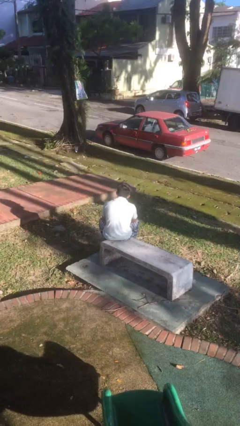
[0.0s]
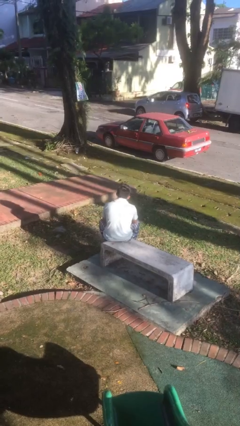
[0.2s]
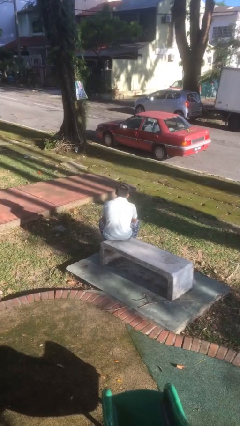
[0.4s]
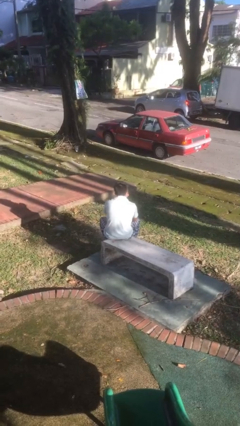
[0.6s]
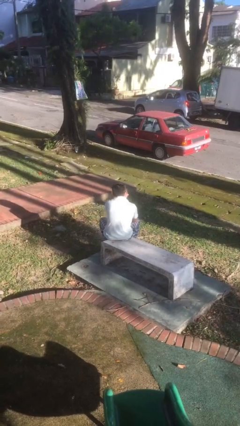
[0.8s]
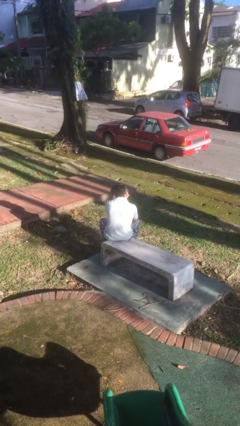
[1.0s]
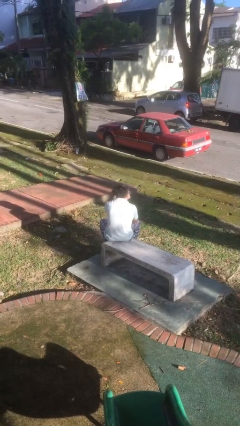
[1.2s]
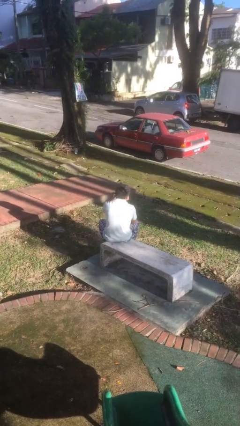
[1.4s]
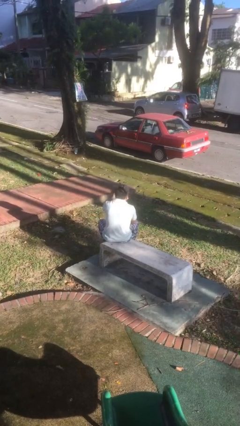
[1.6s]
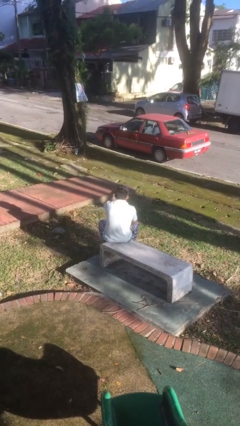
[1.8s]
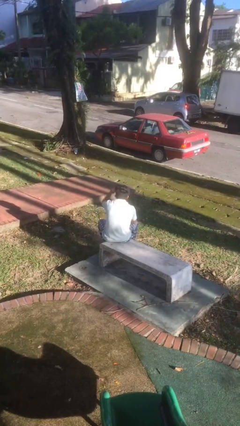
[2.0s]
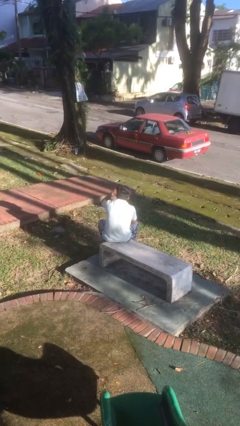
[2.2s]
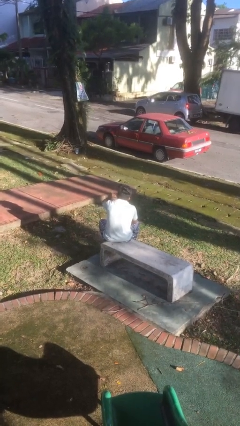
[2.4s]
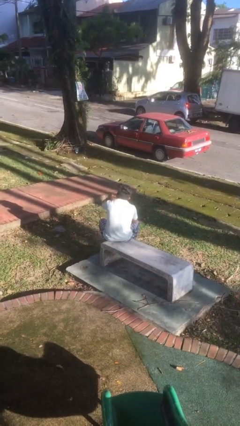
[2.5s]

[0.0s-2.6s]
person strokes hair

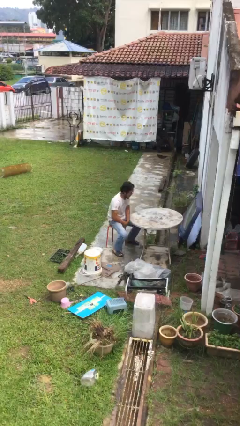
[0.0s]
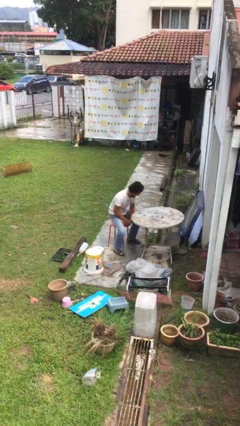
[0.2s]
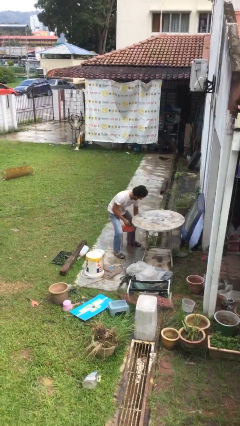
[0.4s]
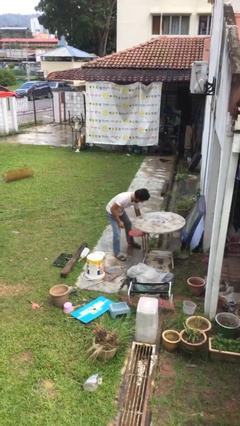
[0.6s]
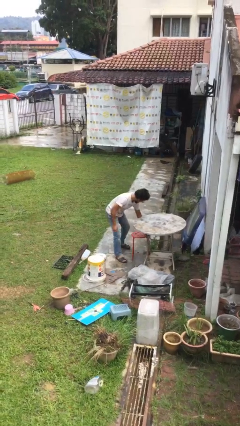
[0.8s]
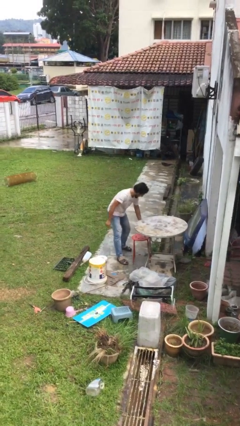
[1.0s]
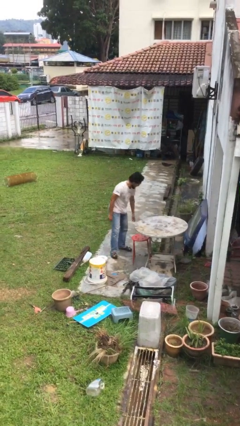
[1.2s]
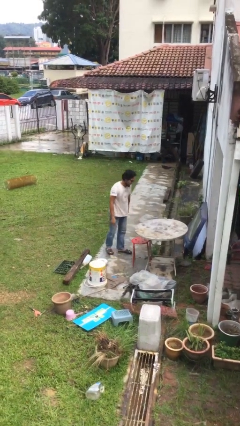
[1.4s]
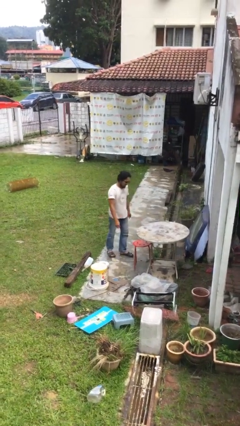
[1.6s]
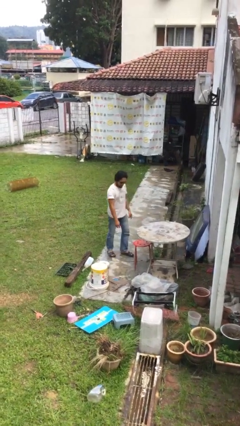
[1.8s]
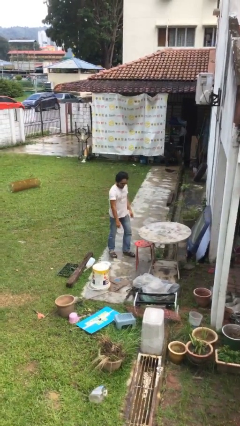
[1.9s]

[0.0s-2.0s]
person stands up

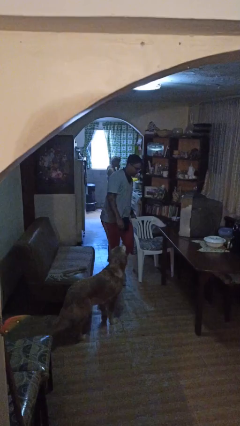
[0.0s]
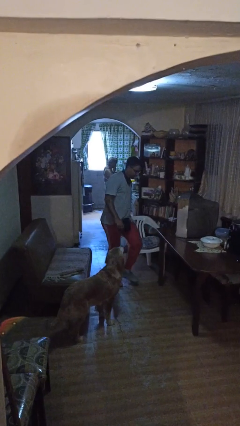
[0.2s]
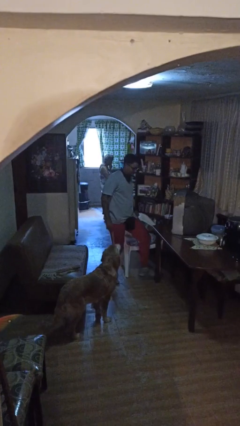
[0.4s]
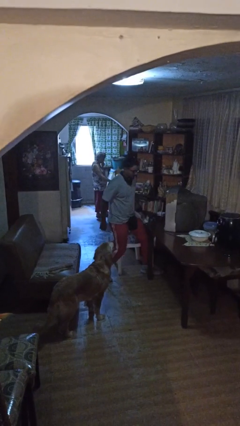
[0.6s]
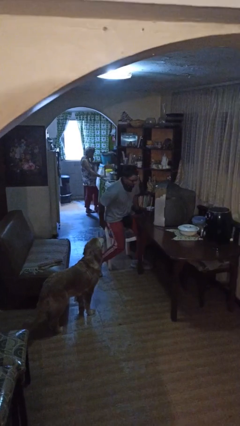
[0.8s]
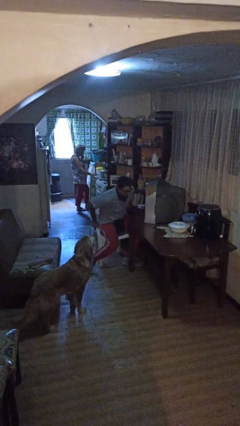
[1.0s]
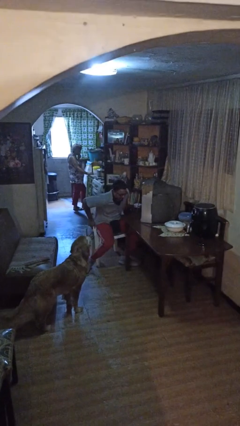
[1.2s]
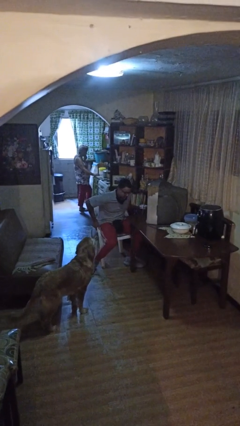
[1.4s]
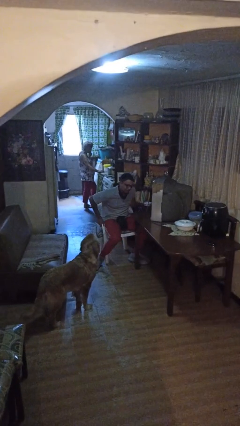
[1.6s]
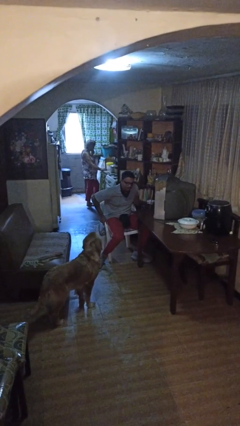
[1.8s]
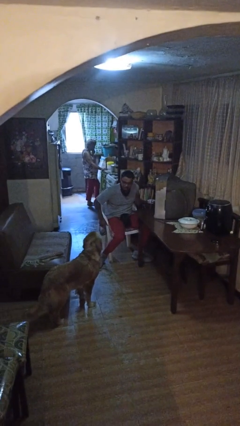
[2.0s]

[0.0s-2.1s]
person sits down

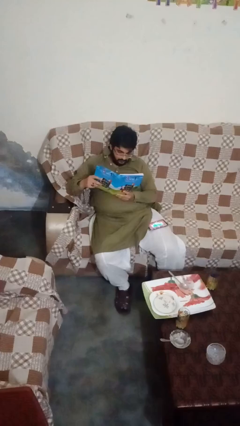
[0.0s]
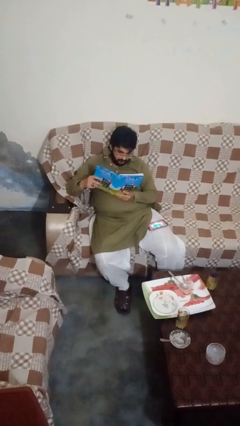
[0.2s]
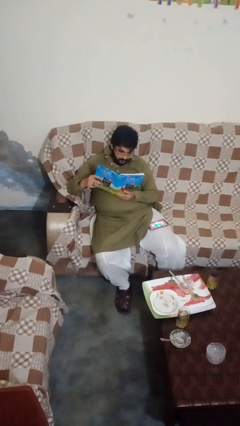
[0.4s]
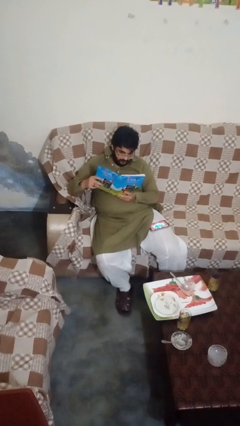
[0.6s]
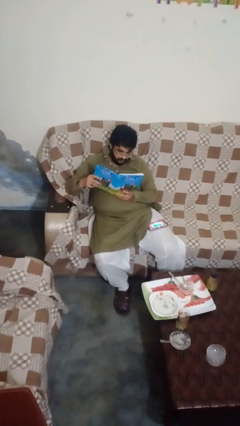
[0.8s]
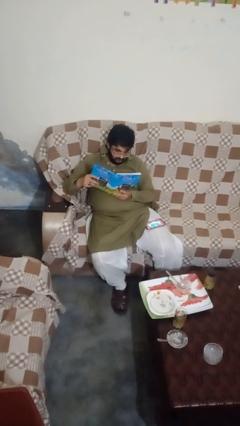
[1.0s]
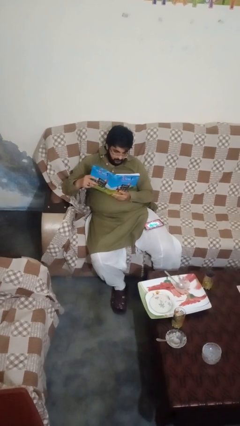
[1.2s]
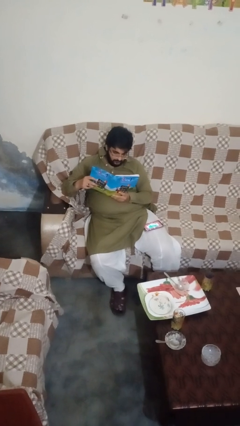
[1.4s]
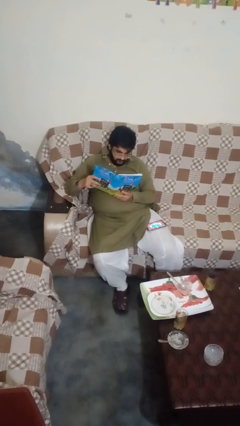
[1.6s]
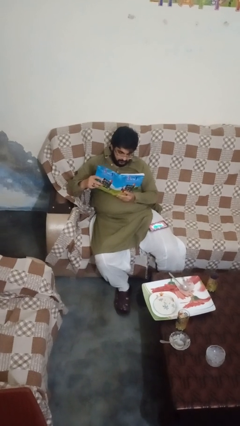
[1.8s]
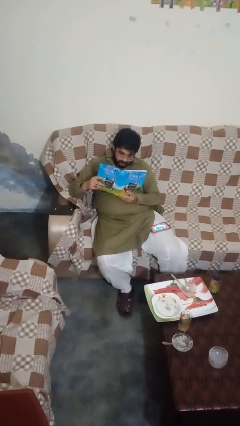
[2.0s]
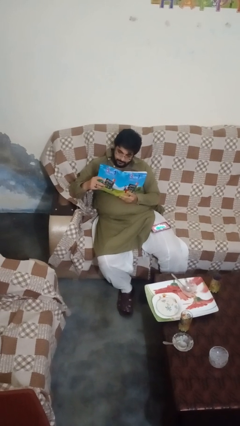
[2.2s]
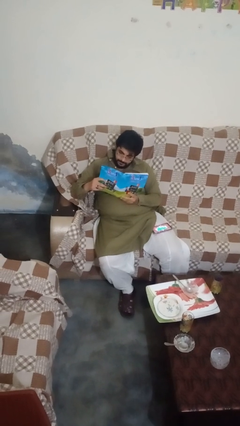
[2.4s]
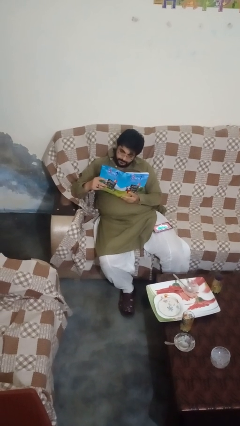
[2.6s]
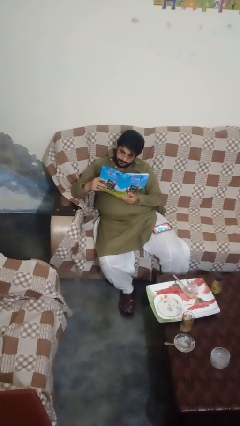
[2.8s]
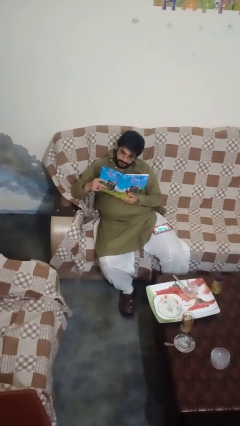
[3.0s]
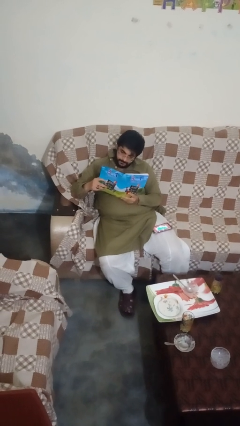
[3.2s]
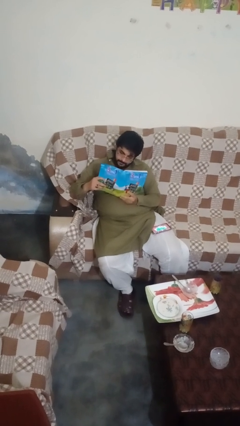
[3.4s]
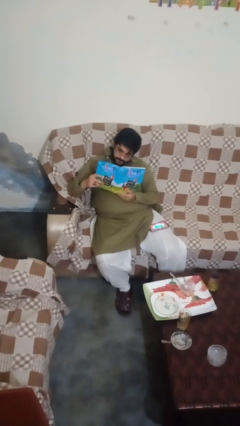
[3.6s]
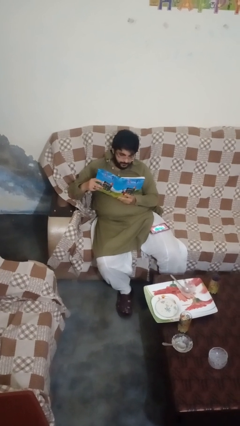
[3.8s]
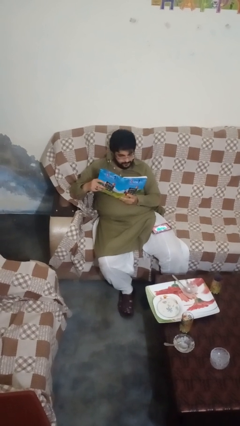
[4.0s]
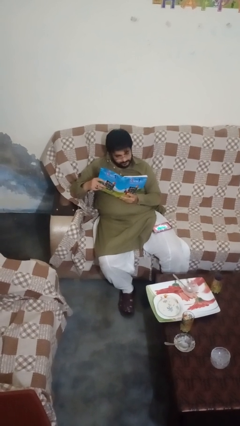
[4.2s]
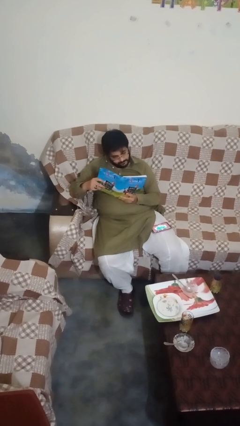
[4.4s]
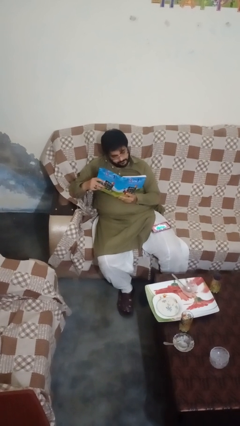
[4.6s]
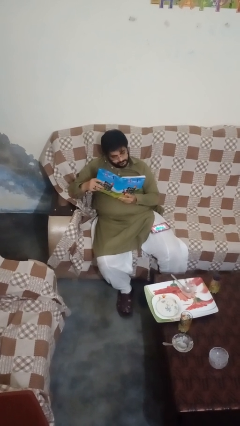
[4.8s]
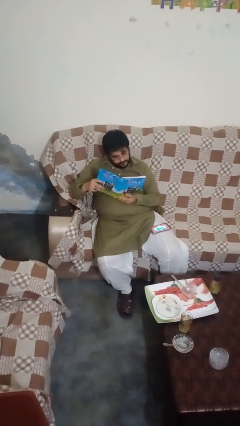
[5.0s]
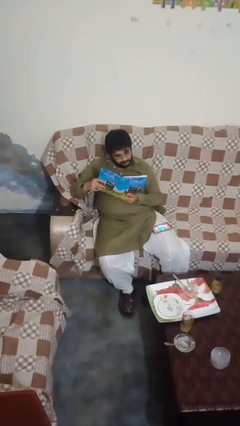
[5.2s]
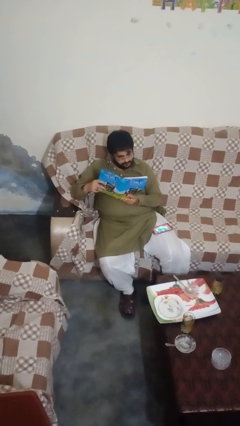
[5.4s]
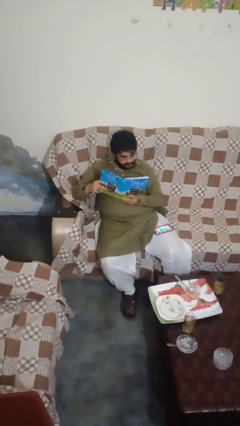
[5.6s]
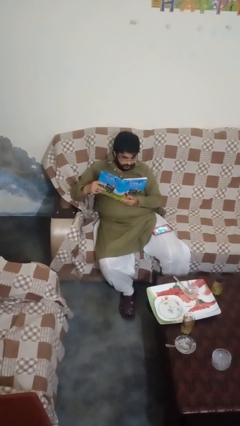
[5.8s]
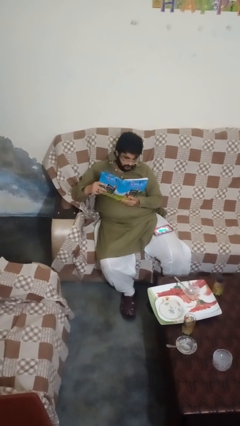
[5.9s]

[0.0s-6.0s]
person reads magazine

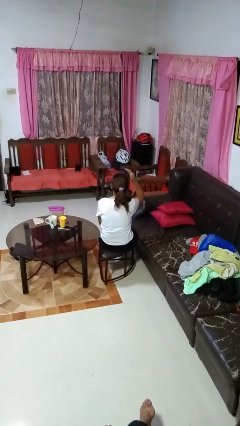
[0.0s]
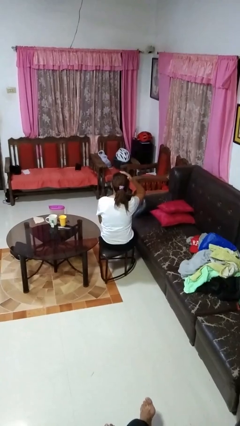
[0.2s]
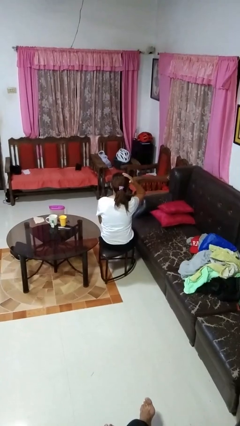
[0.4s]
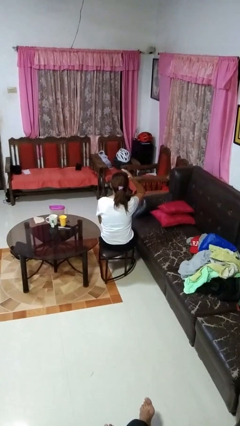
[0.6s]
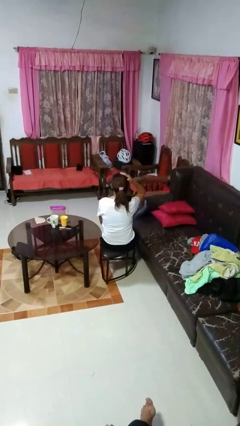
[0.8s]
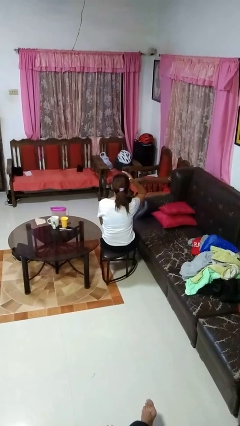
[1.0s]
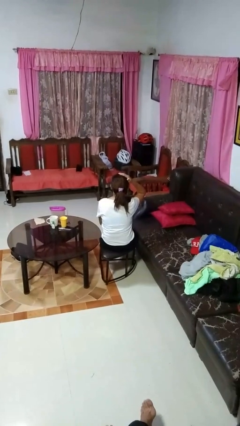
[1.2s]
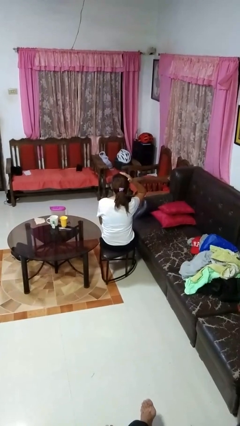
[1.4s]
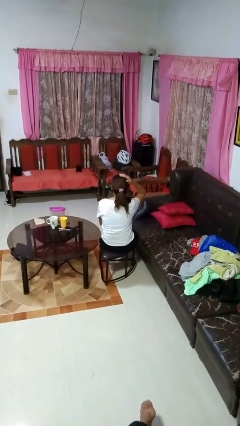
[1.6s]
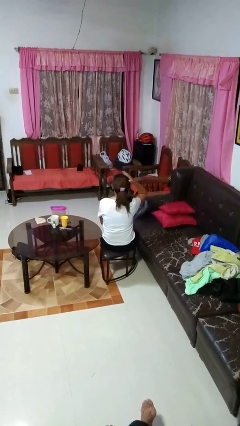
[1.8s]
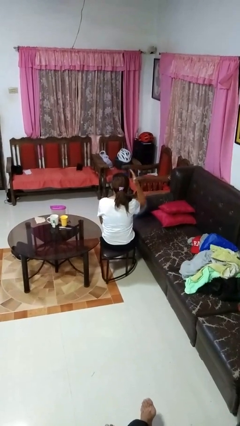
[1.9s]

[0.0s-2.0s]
person pats head

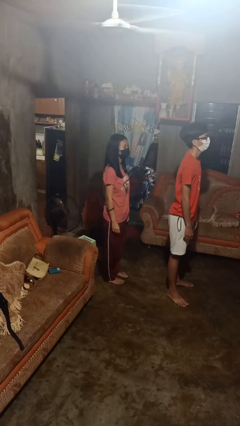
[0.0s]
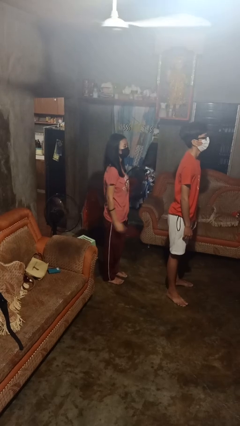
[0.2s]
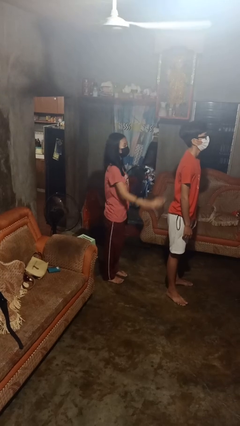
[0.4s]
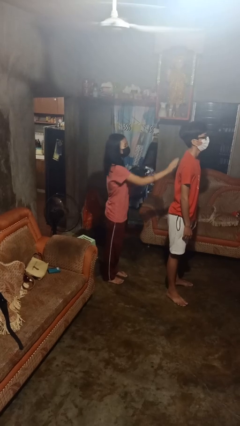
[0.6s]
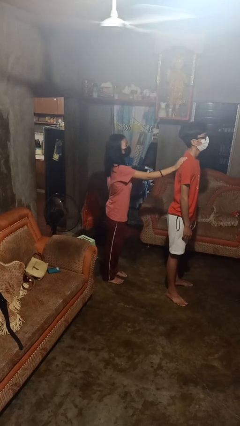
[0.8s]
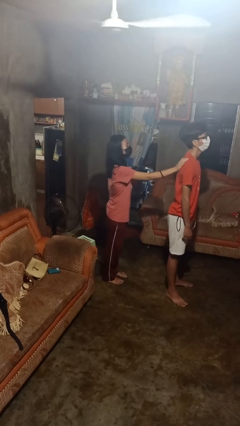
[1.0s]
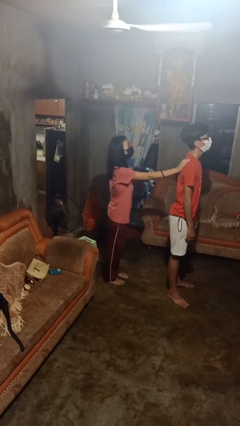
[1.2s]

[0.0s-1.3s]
person touches back of person

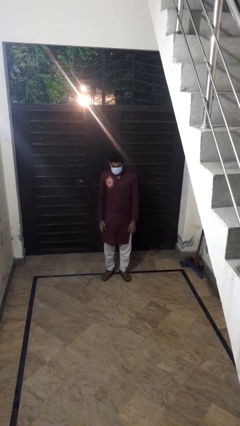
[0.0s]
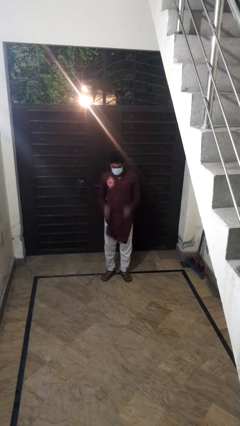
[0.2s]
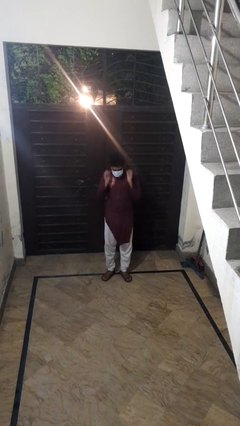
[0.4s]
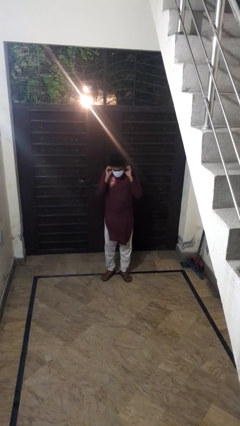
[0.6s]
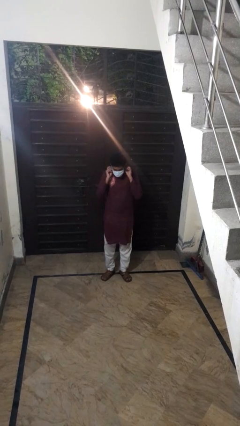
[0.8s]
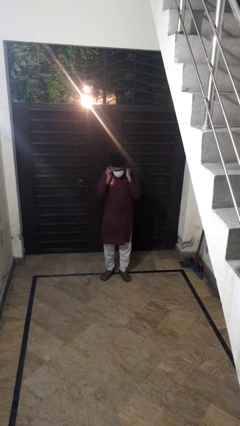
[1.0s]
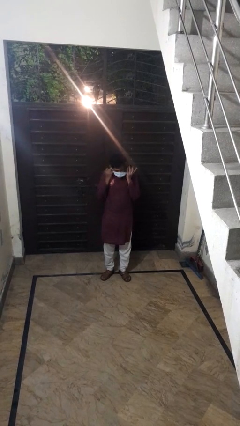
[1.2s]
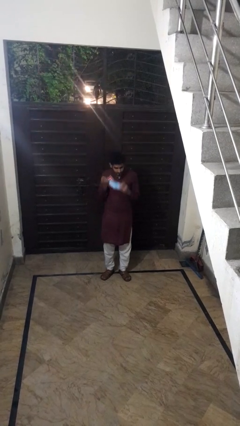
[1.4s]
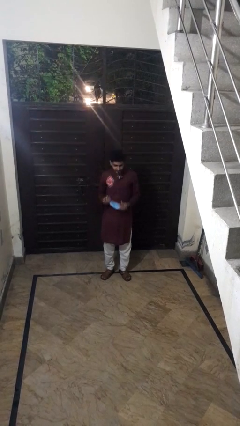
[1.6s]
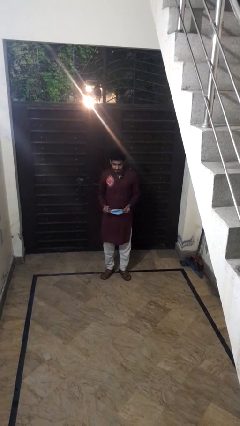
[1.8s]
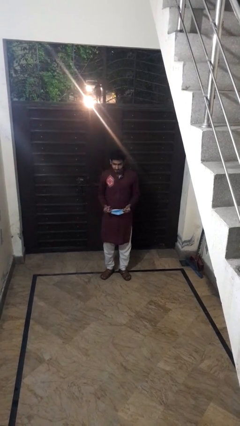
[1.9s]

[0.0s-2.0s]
person takes off facemask
